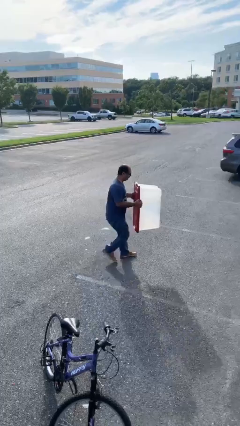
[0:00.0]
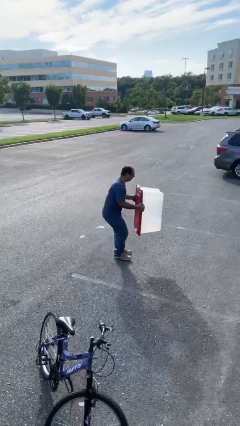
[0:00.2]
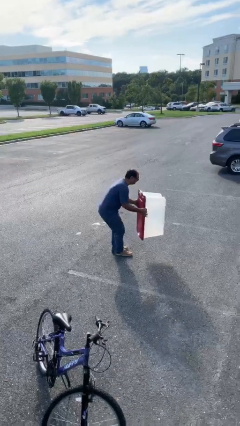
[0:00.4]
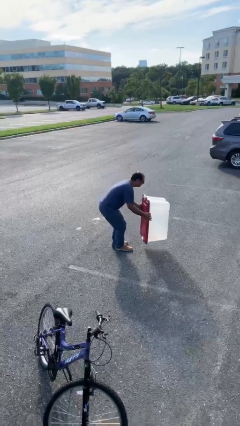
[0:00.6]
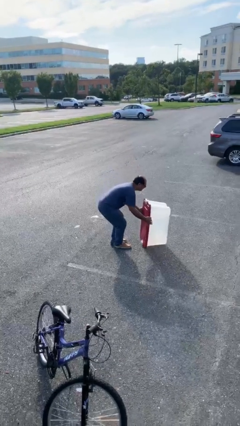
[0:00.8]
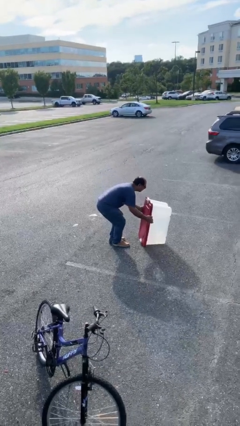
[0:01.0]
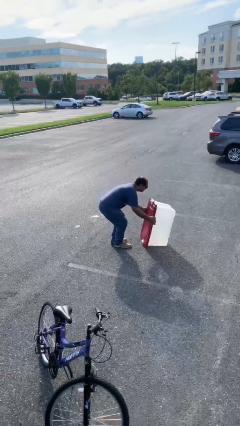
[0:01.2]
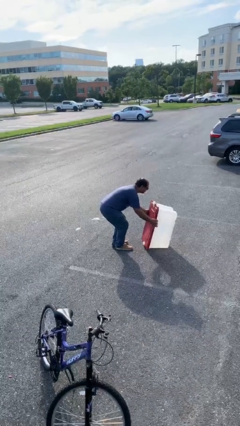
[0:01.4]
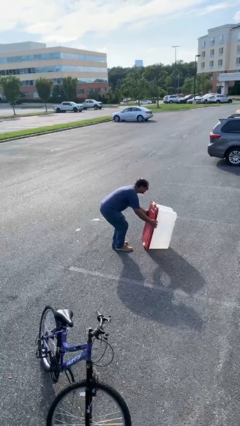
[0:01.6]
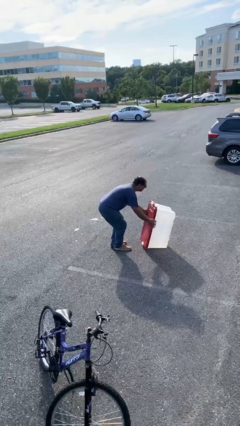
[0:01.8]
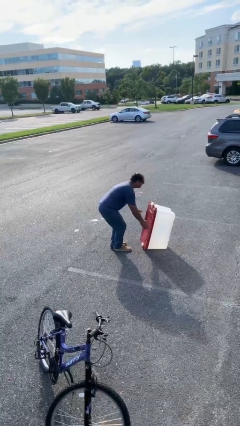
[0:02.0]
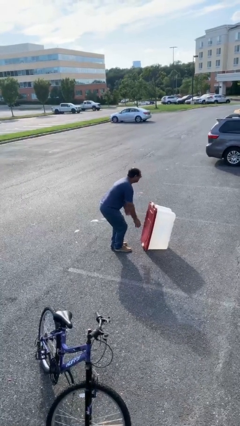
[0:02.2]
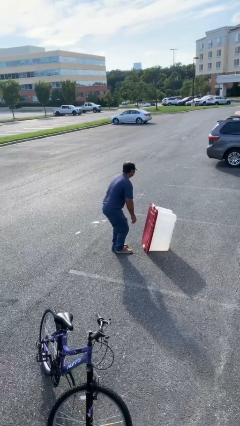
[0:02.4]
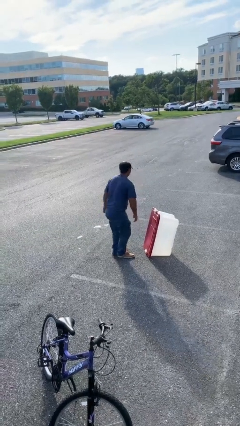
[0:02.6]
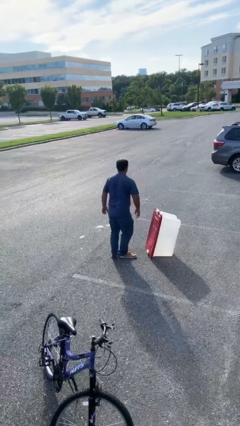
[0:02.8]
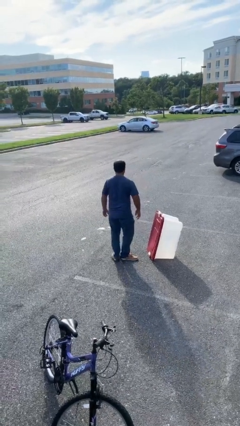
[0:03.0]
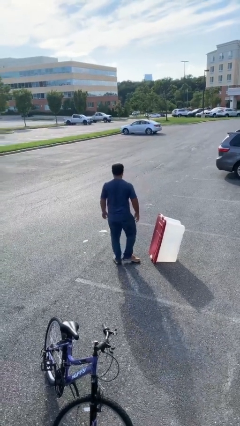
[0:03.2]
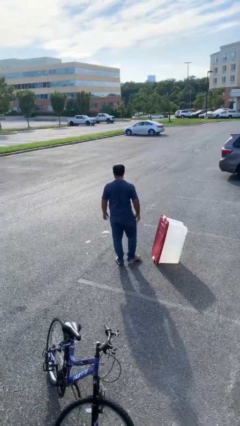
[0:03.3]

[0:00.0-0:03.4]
person puts down object on floor

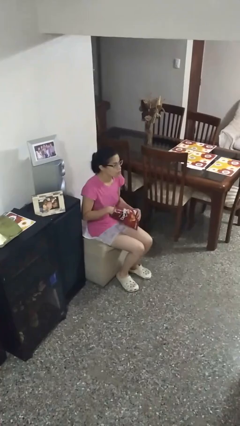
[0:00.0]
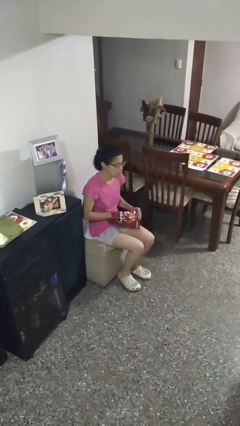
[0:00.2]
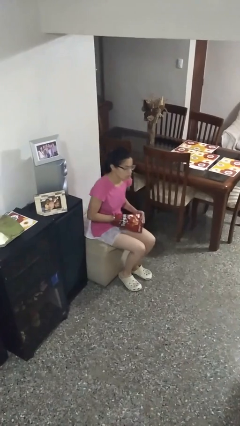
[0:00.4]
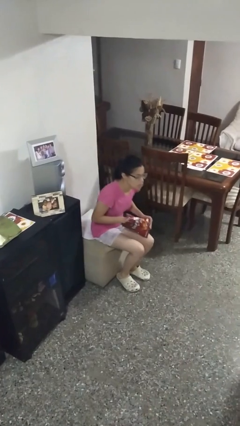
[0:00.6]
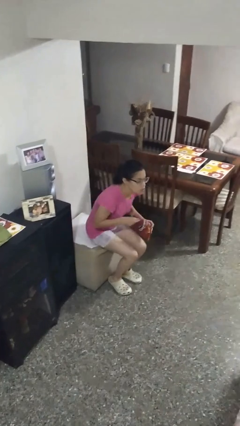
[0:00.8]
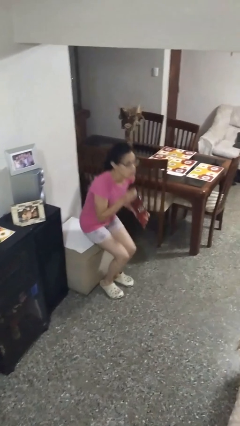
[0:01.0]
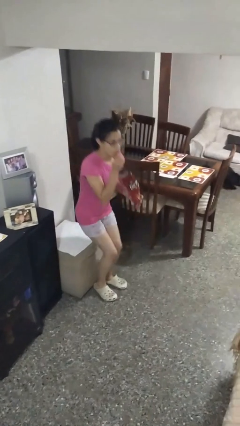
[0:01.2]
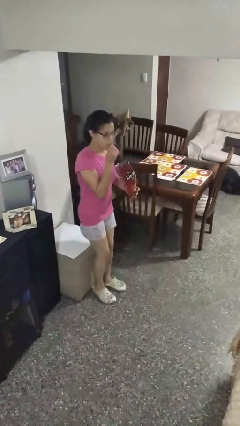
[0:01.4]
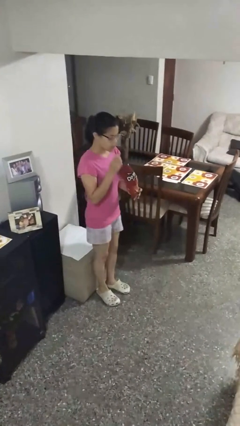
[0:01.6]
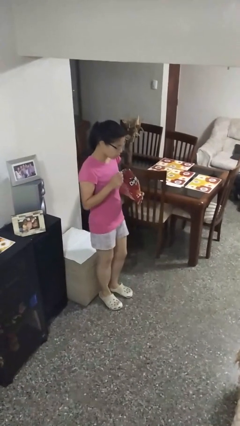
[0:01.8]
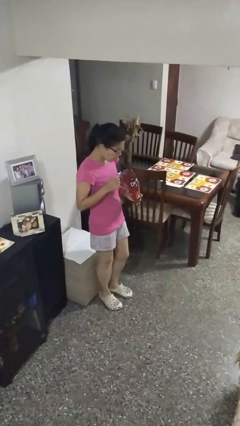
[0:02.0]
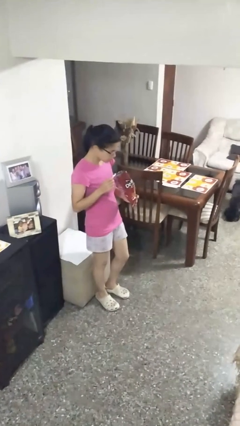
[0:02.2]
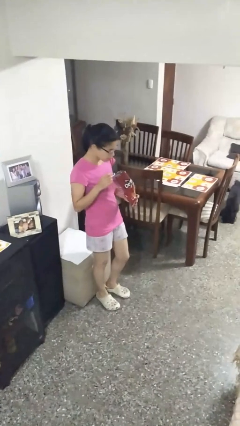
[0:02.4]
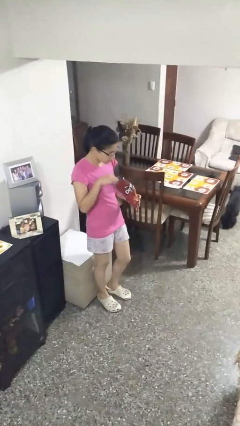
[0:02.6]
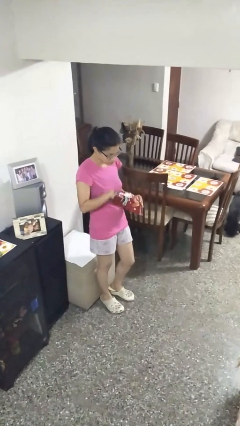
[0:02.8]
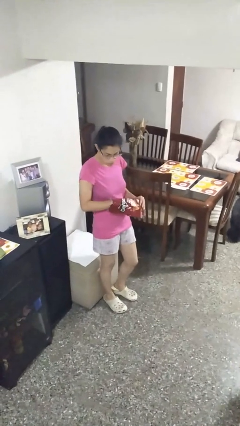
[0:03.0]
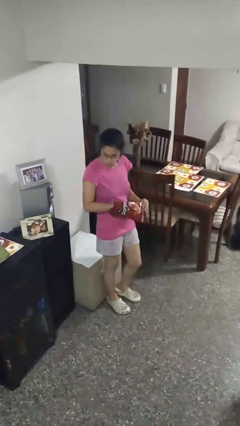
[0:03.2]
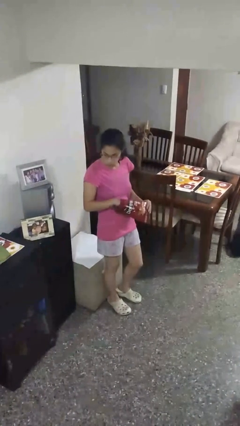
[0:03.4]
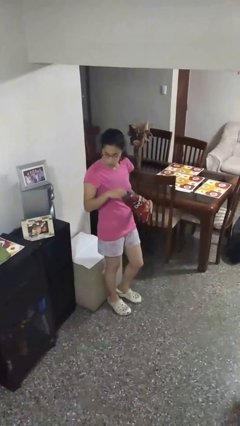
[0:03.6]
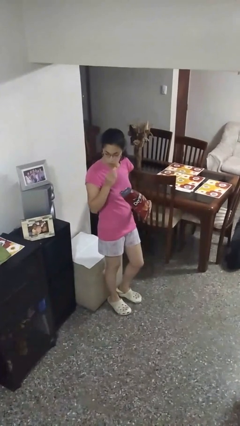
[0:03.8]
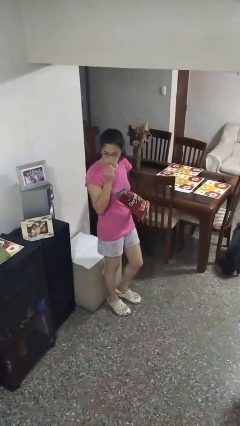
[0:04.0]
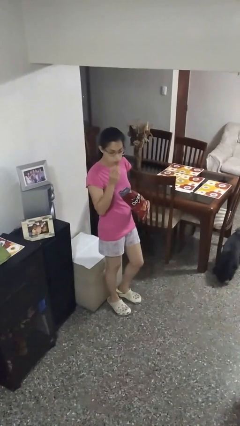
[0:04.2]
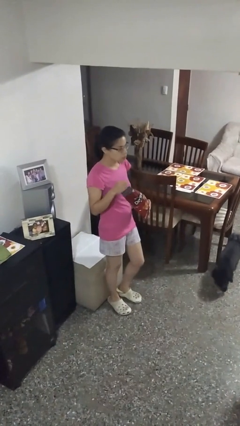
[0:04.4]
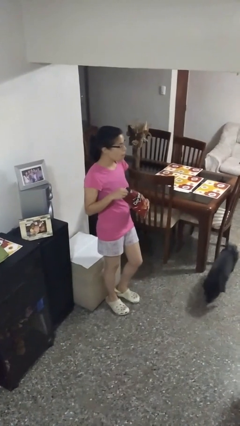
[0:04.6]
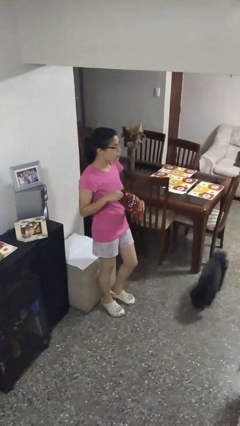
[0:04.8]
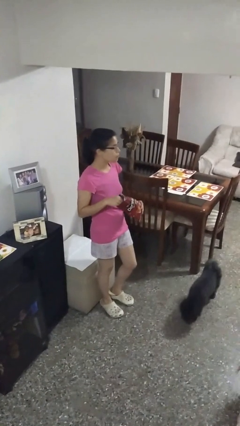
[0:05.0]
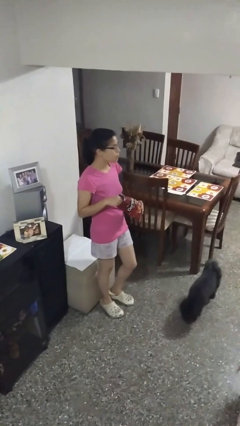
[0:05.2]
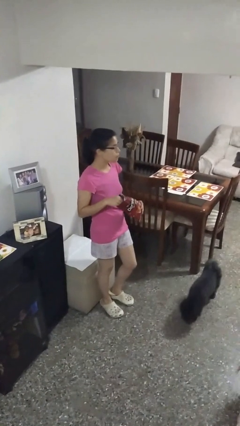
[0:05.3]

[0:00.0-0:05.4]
person eats snack from bag

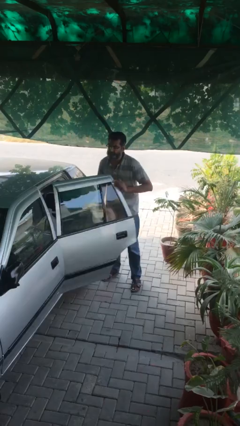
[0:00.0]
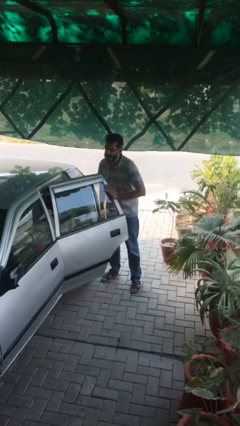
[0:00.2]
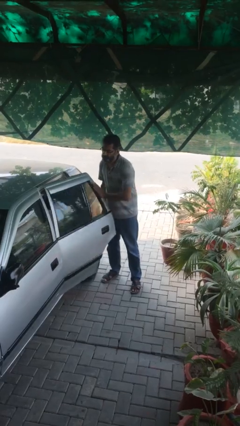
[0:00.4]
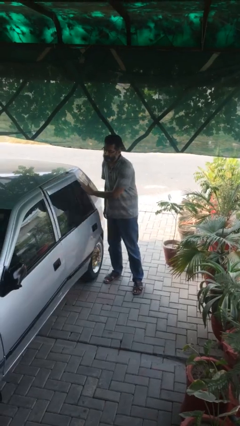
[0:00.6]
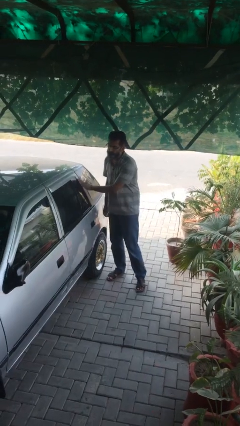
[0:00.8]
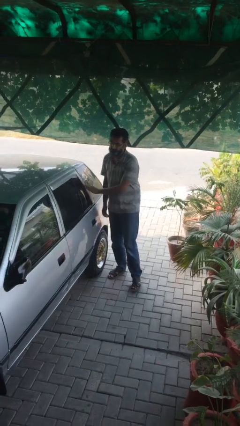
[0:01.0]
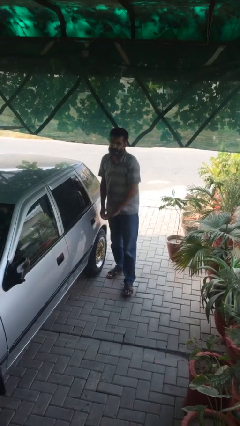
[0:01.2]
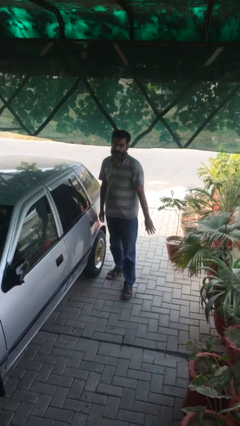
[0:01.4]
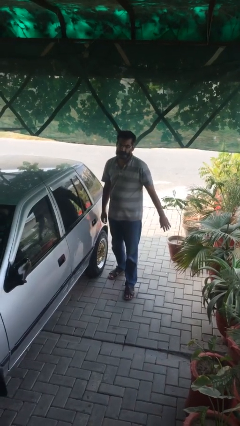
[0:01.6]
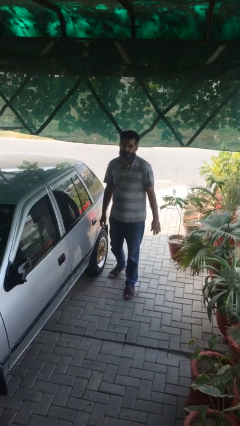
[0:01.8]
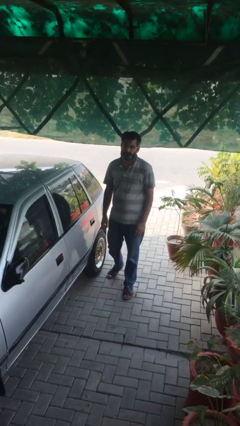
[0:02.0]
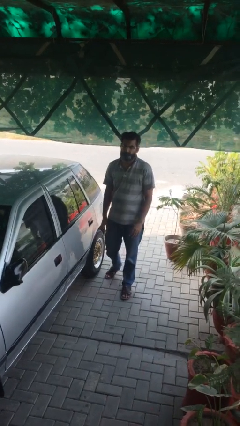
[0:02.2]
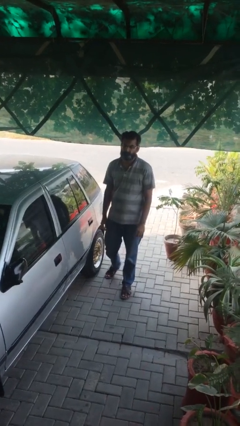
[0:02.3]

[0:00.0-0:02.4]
person closes car door

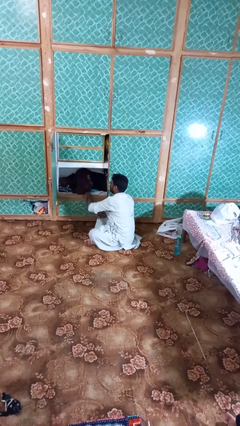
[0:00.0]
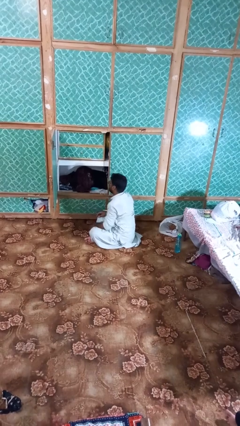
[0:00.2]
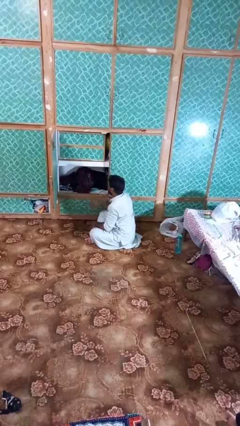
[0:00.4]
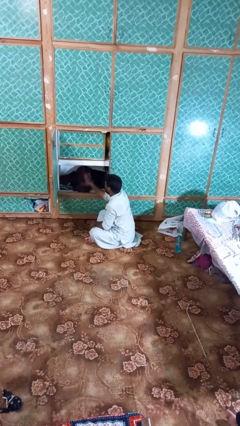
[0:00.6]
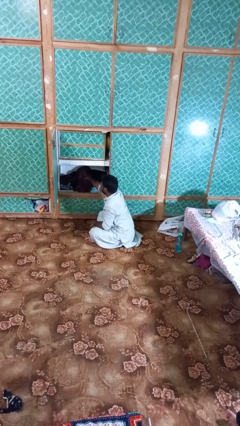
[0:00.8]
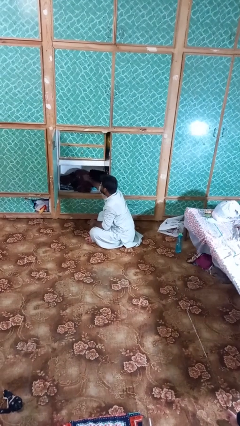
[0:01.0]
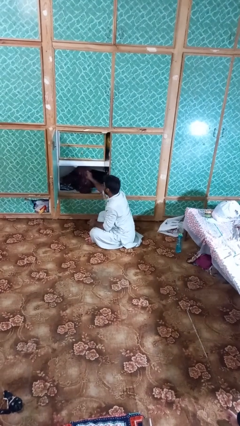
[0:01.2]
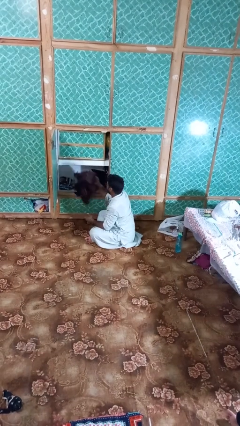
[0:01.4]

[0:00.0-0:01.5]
person takes clothes from dresser

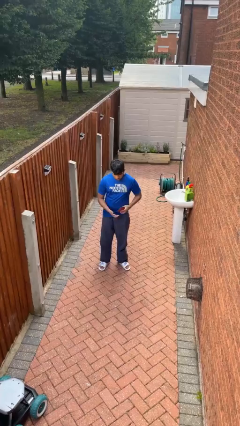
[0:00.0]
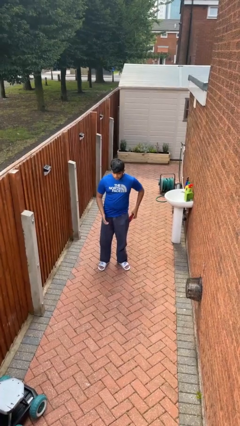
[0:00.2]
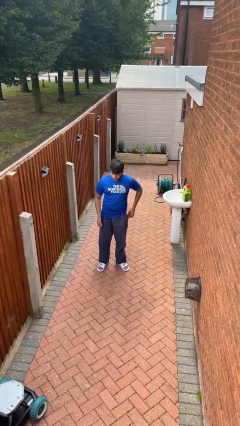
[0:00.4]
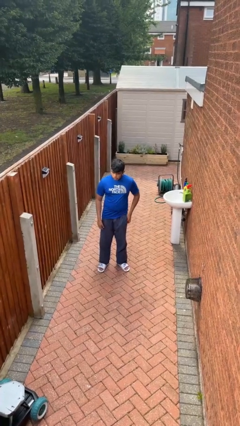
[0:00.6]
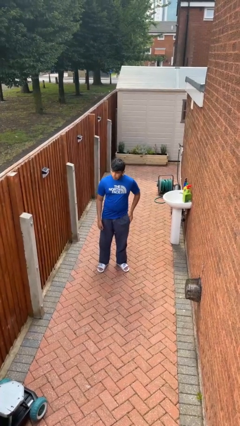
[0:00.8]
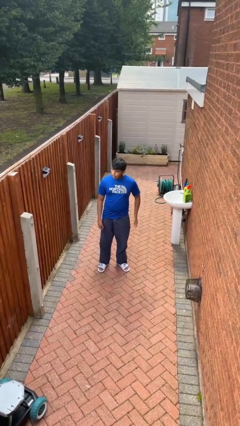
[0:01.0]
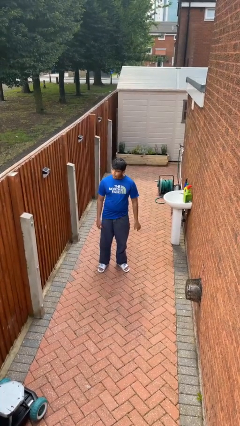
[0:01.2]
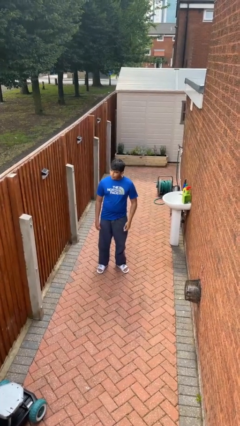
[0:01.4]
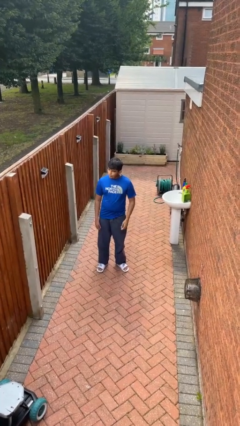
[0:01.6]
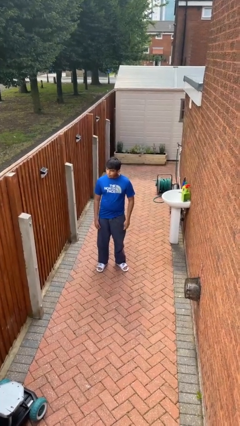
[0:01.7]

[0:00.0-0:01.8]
person puts phone into pocket

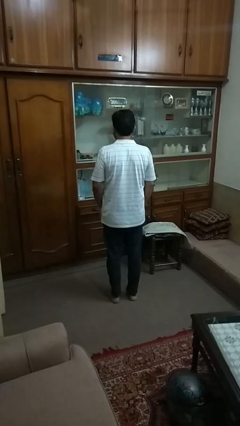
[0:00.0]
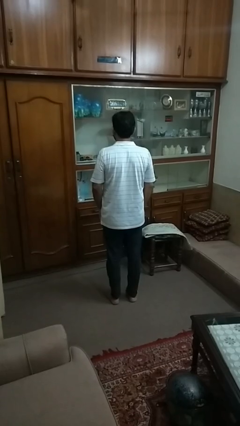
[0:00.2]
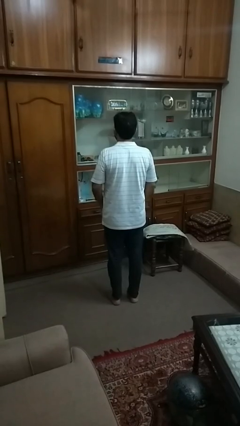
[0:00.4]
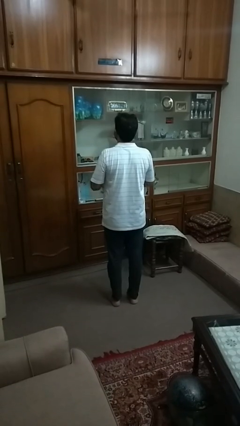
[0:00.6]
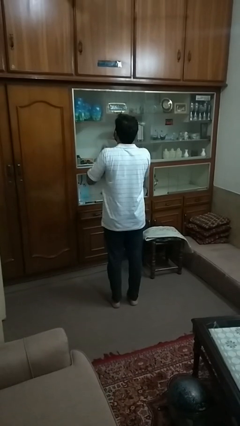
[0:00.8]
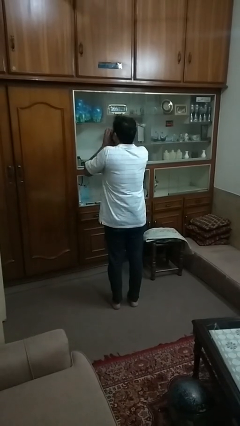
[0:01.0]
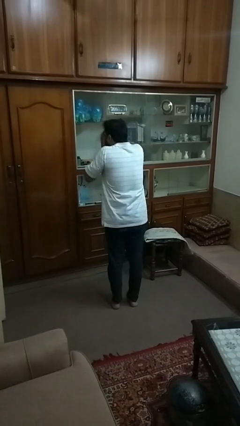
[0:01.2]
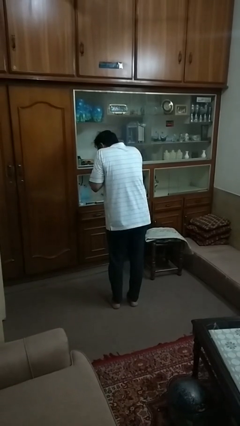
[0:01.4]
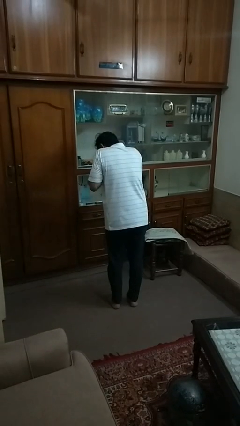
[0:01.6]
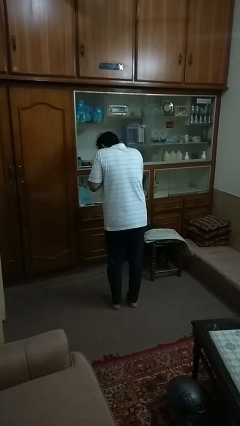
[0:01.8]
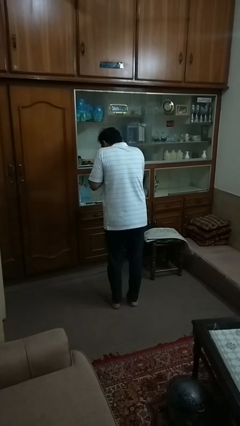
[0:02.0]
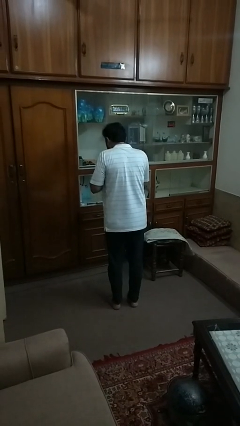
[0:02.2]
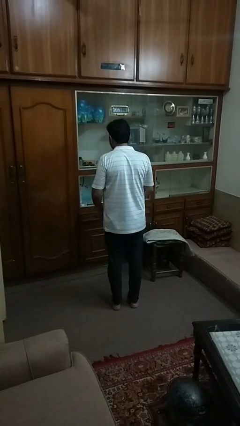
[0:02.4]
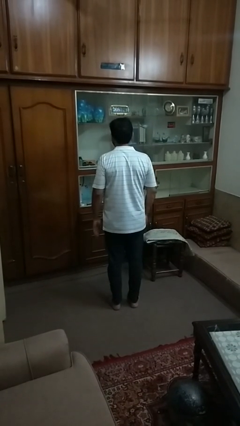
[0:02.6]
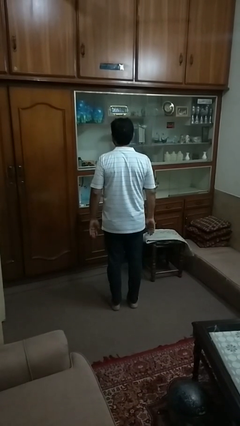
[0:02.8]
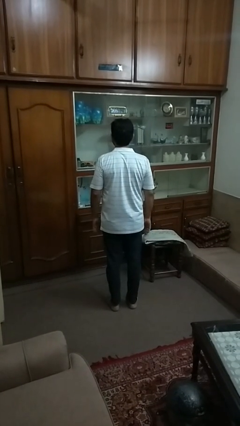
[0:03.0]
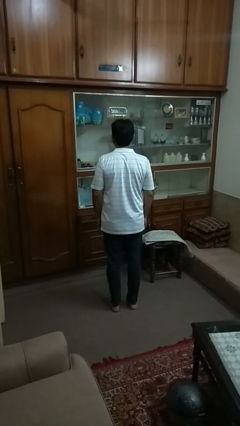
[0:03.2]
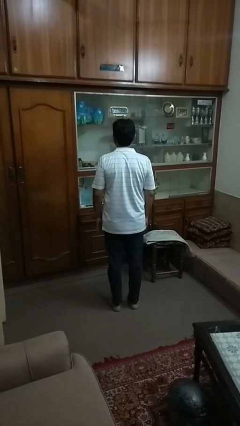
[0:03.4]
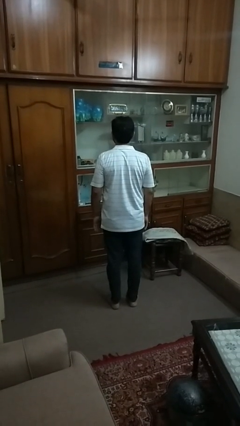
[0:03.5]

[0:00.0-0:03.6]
person sneezes into hand
